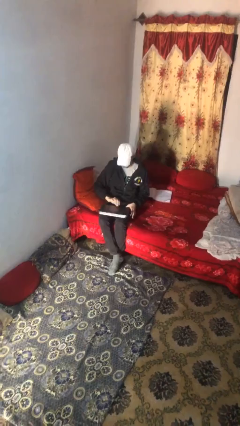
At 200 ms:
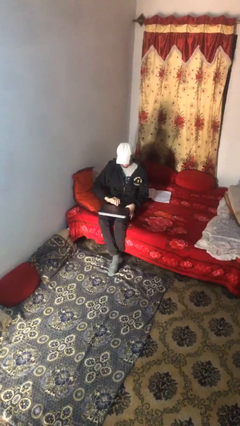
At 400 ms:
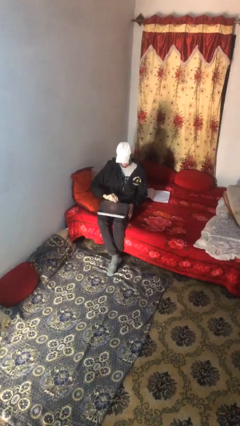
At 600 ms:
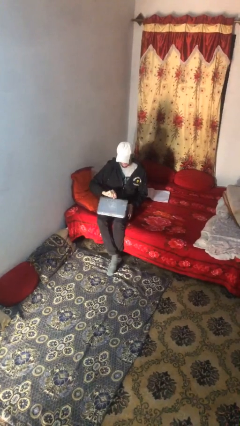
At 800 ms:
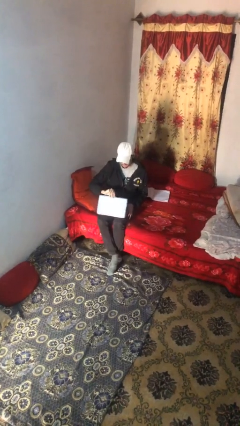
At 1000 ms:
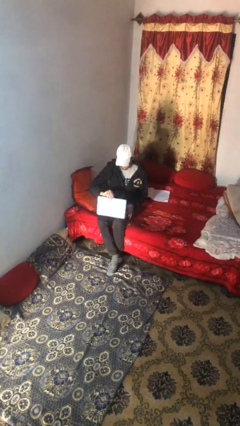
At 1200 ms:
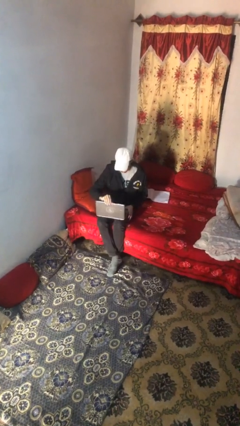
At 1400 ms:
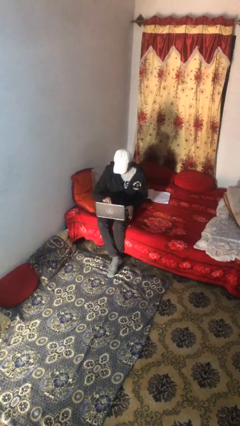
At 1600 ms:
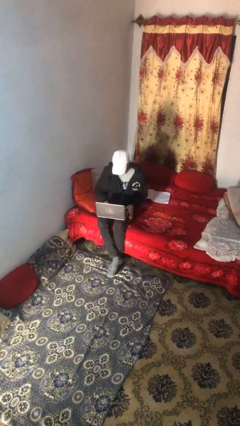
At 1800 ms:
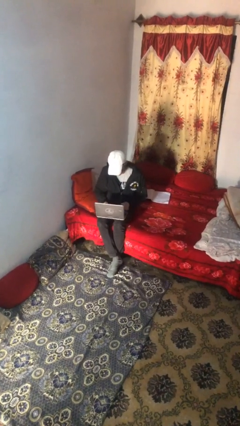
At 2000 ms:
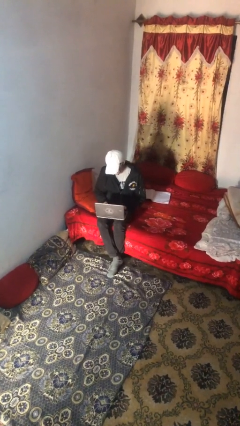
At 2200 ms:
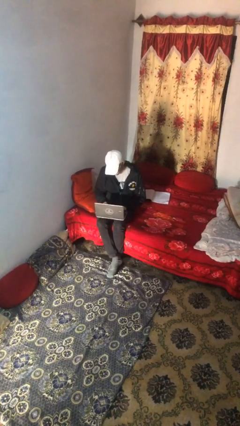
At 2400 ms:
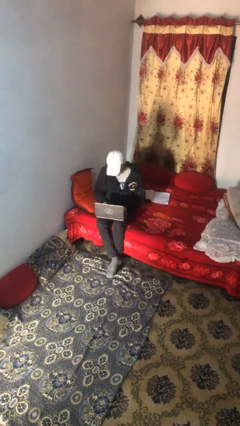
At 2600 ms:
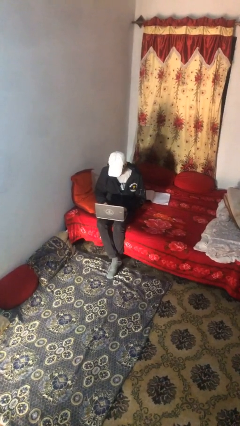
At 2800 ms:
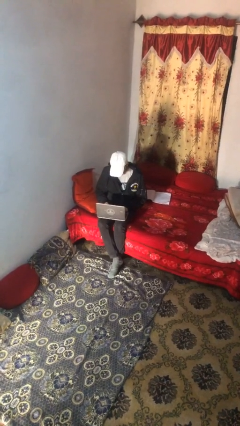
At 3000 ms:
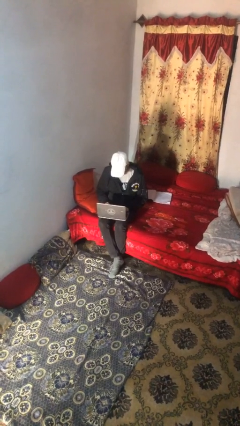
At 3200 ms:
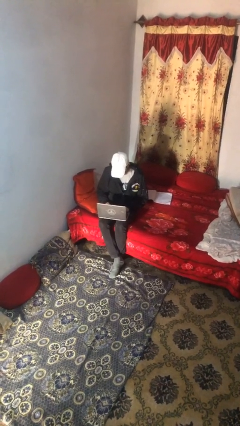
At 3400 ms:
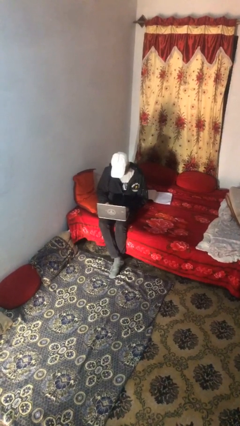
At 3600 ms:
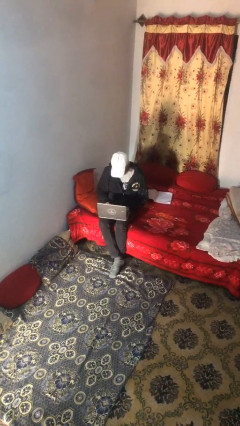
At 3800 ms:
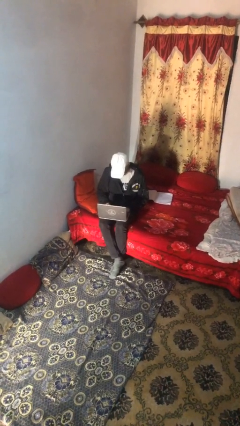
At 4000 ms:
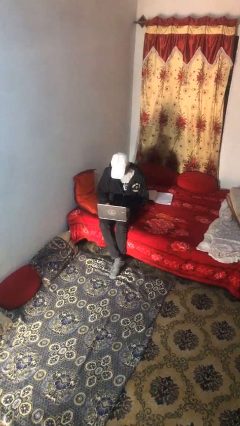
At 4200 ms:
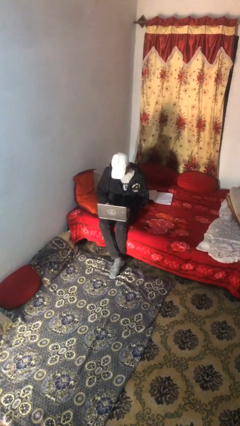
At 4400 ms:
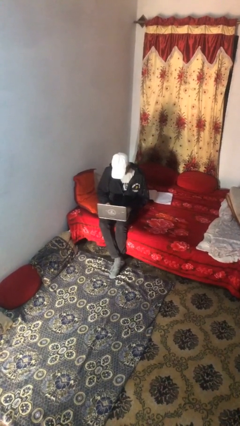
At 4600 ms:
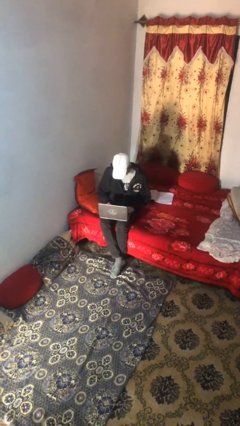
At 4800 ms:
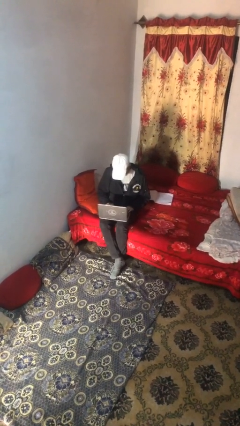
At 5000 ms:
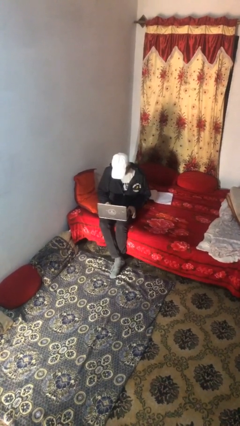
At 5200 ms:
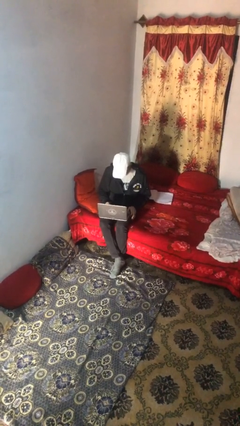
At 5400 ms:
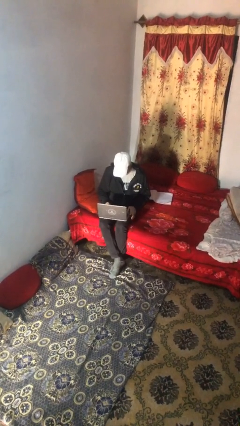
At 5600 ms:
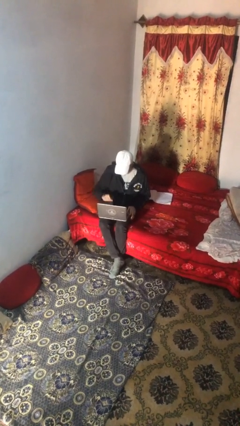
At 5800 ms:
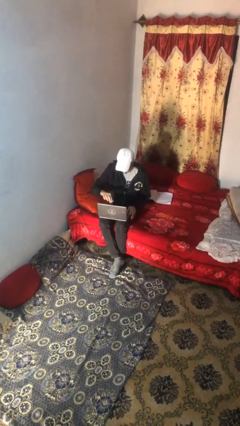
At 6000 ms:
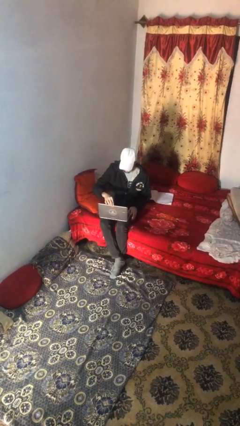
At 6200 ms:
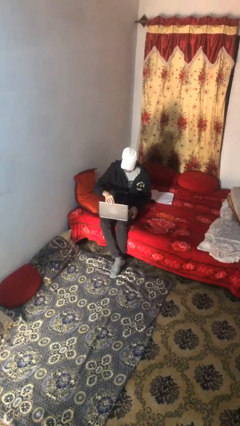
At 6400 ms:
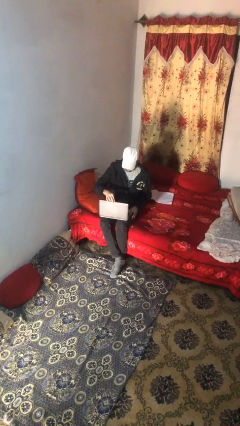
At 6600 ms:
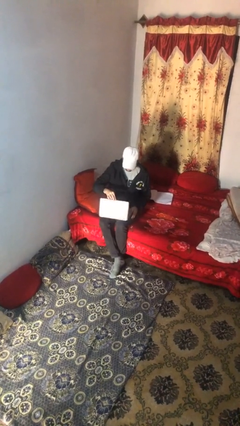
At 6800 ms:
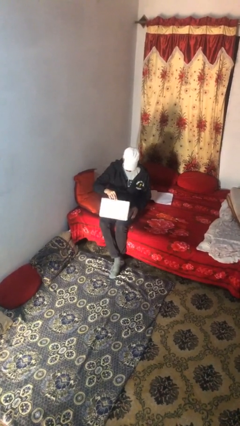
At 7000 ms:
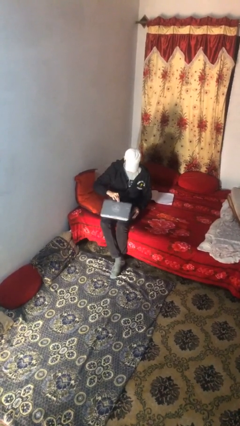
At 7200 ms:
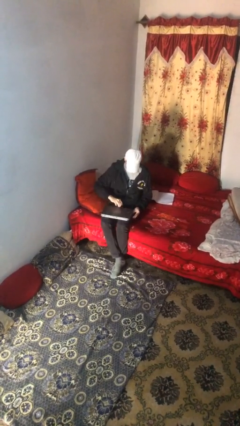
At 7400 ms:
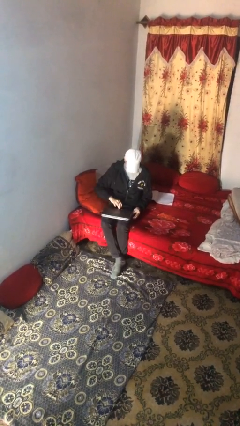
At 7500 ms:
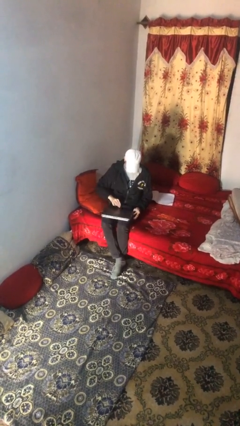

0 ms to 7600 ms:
person interacts with laptop

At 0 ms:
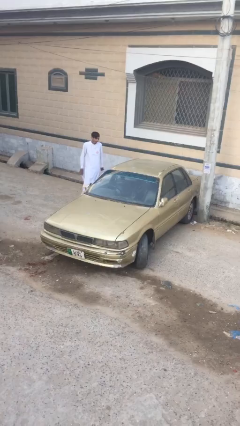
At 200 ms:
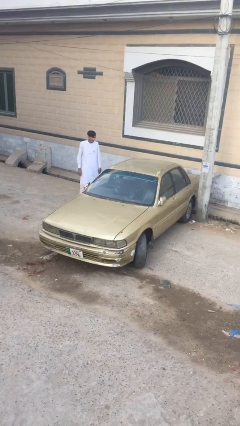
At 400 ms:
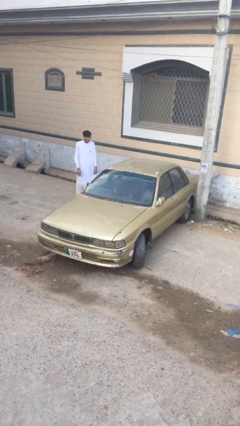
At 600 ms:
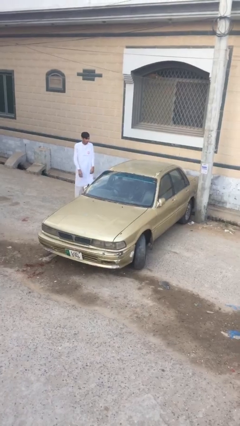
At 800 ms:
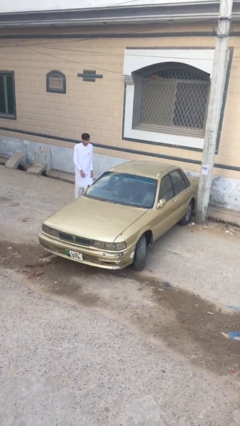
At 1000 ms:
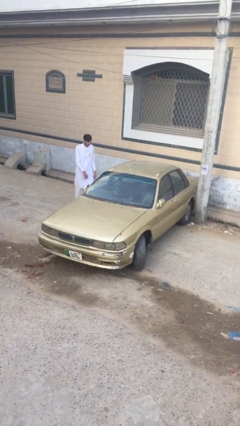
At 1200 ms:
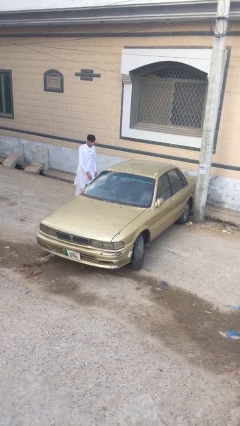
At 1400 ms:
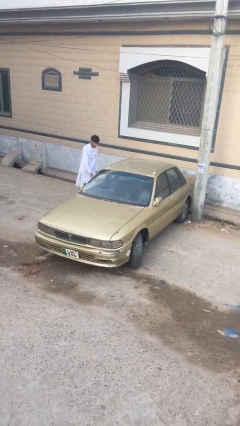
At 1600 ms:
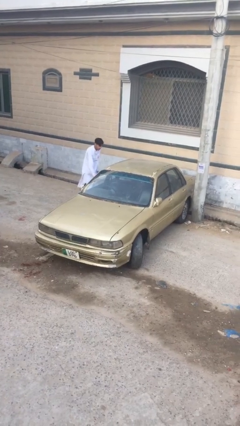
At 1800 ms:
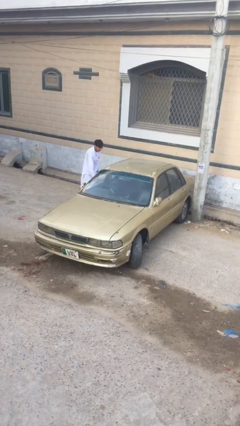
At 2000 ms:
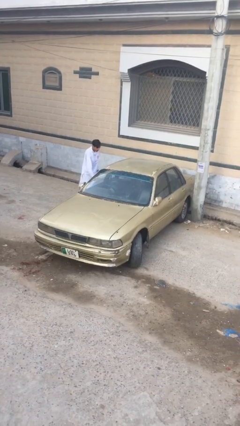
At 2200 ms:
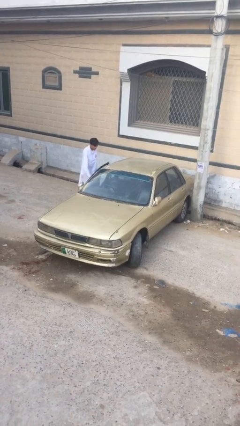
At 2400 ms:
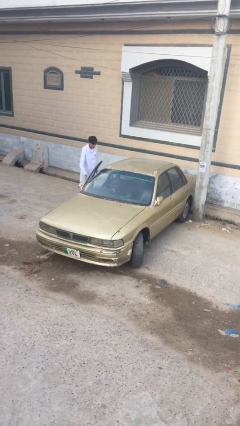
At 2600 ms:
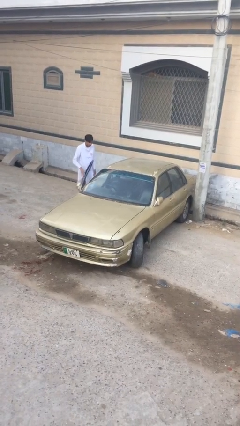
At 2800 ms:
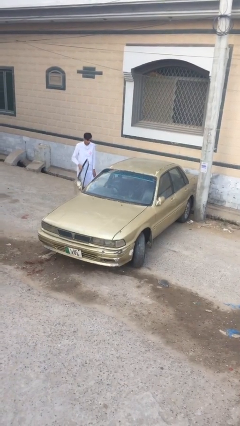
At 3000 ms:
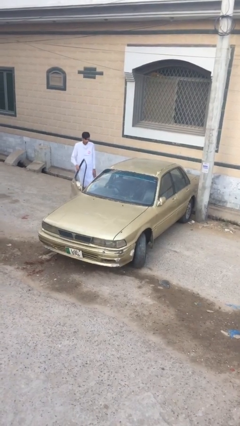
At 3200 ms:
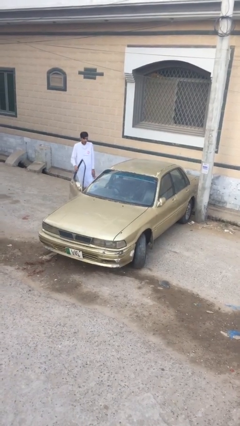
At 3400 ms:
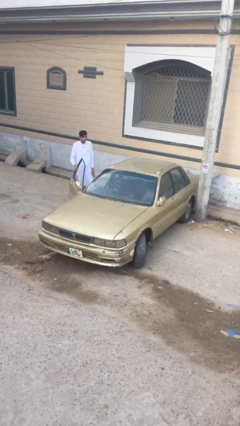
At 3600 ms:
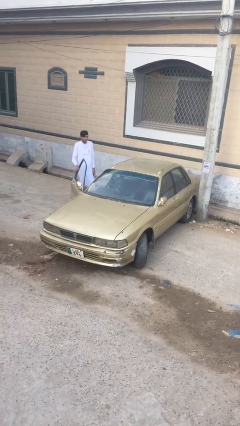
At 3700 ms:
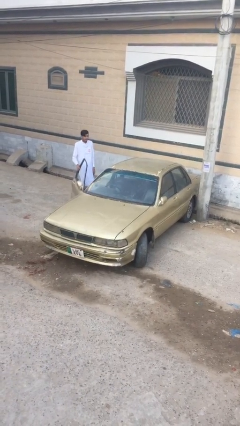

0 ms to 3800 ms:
person opens car door

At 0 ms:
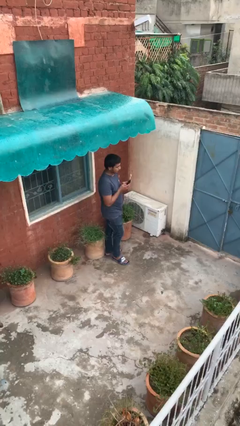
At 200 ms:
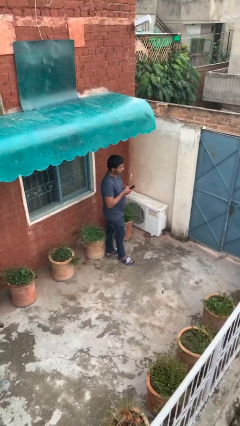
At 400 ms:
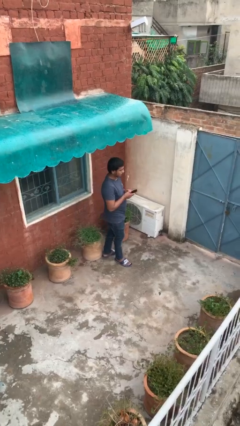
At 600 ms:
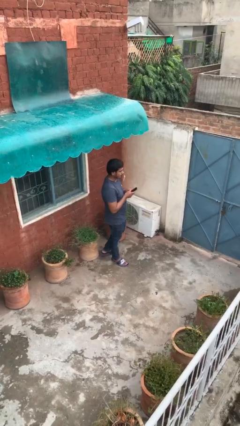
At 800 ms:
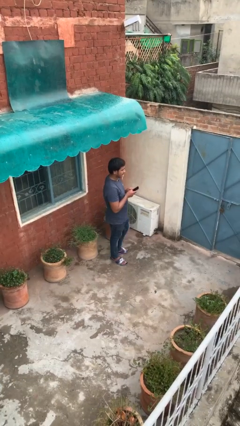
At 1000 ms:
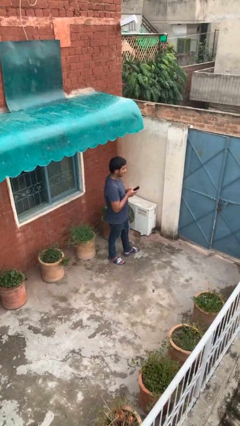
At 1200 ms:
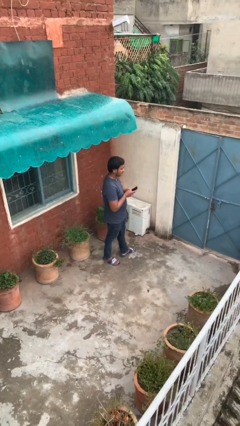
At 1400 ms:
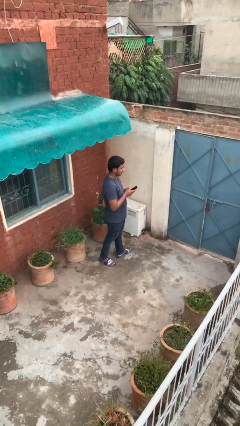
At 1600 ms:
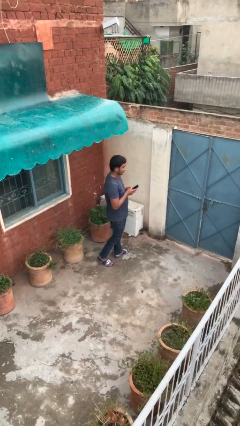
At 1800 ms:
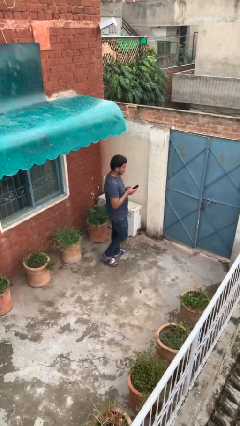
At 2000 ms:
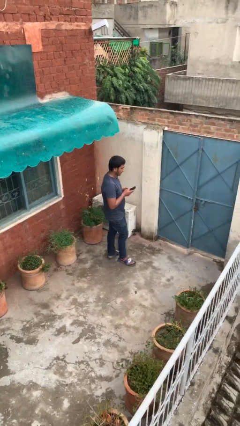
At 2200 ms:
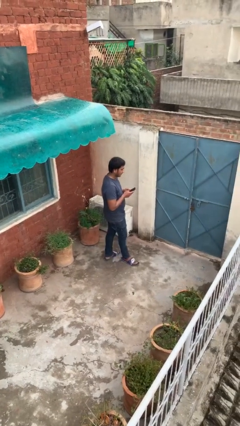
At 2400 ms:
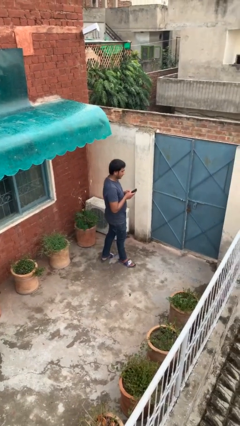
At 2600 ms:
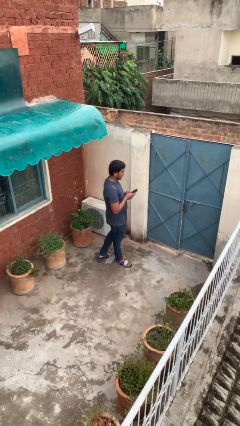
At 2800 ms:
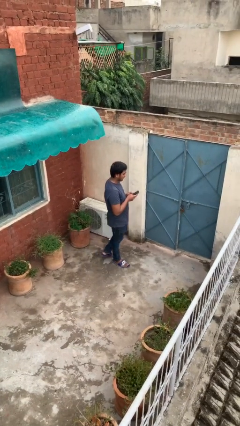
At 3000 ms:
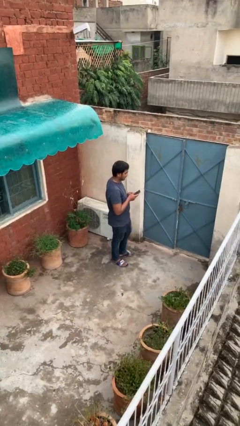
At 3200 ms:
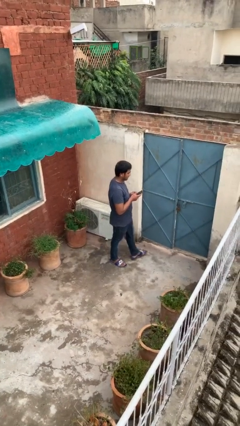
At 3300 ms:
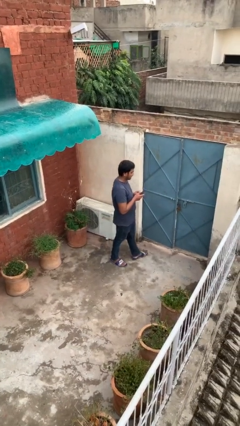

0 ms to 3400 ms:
person texts on phone

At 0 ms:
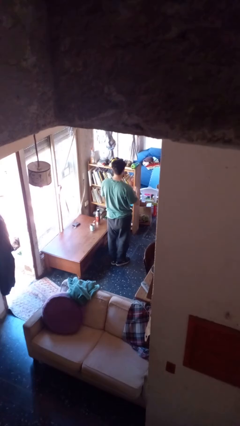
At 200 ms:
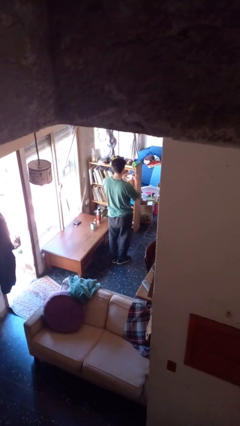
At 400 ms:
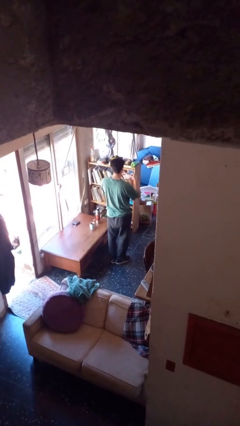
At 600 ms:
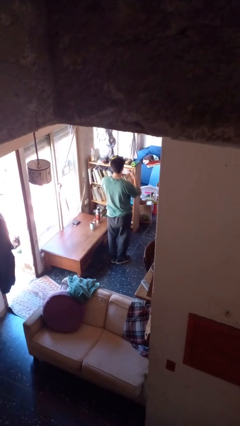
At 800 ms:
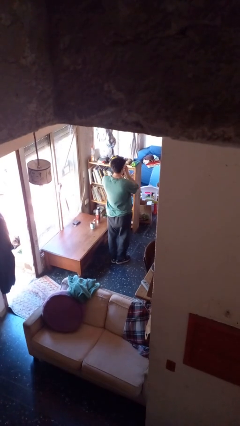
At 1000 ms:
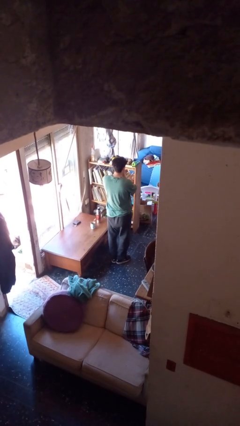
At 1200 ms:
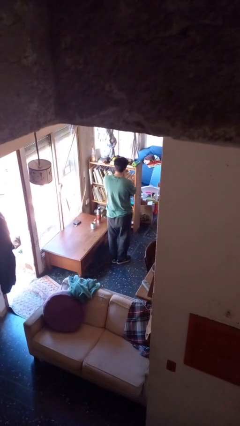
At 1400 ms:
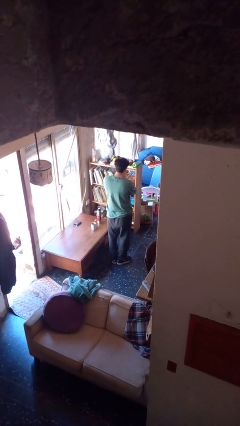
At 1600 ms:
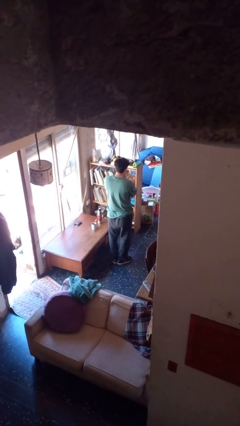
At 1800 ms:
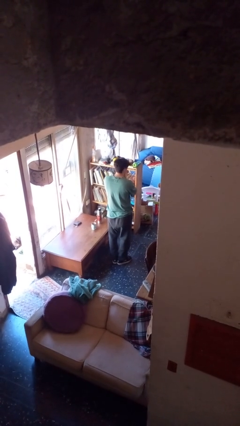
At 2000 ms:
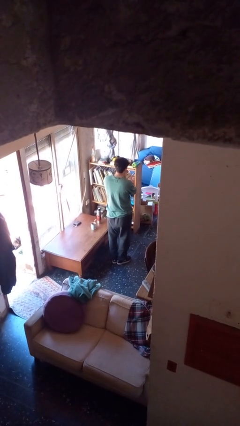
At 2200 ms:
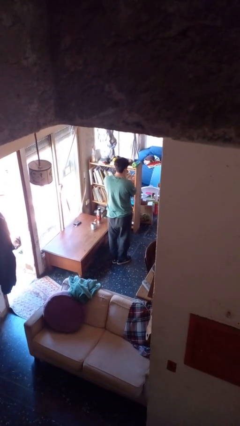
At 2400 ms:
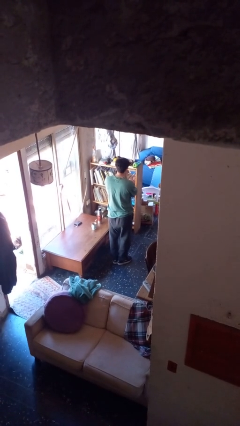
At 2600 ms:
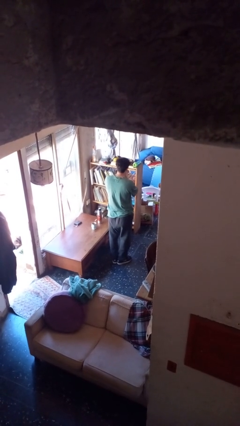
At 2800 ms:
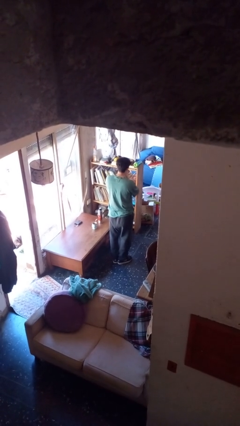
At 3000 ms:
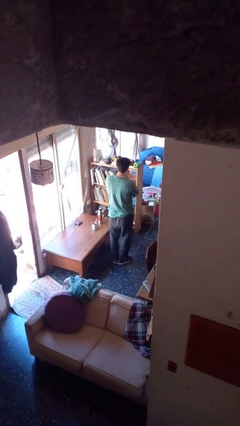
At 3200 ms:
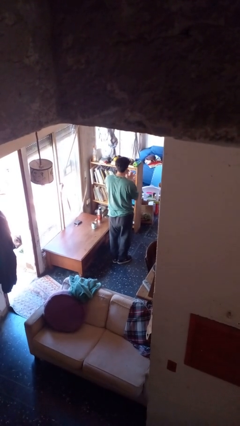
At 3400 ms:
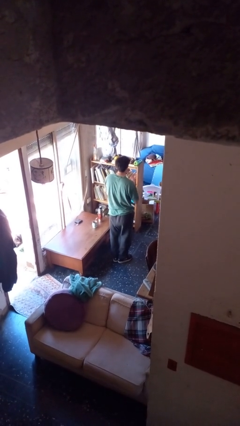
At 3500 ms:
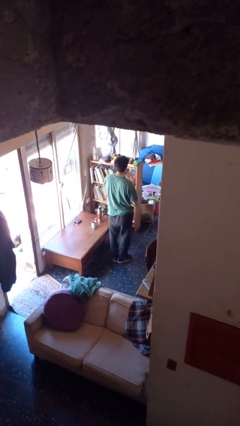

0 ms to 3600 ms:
person blows nose
